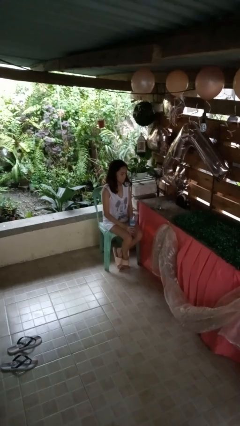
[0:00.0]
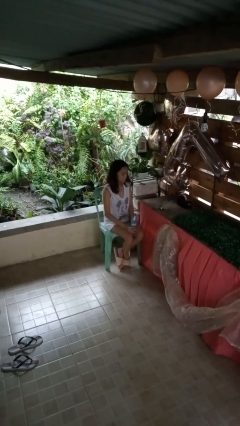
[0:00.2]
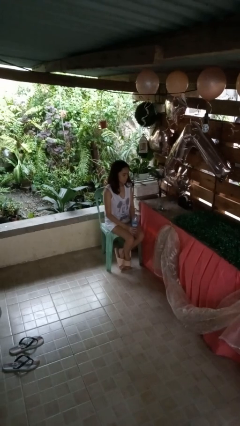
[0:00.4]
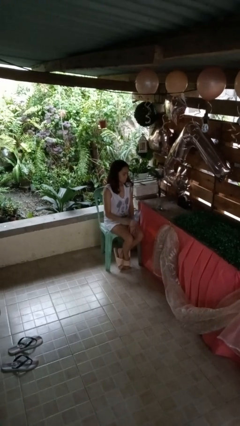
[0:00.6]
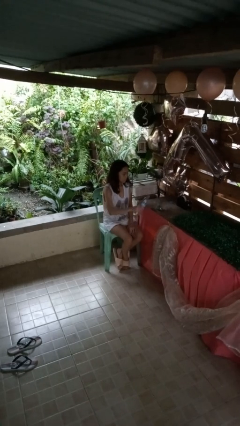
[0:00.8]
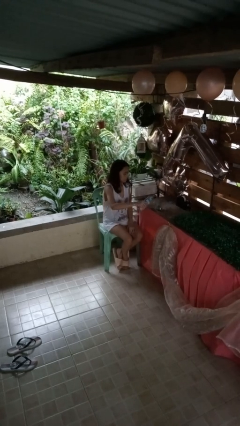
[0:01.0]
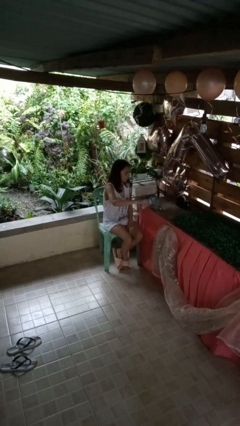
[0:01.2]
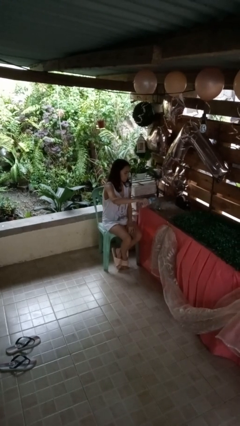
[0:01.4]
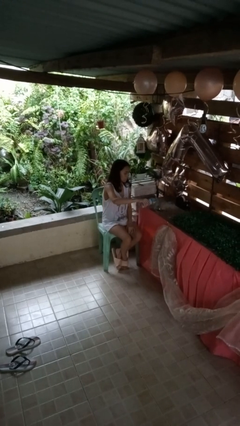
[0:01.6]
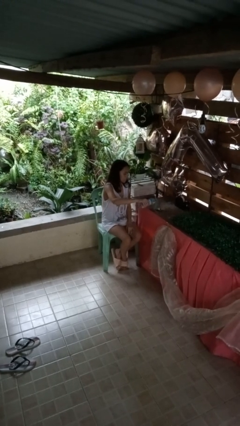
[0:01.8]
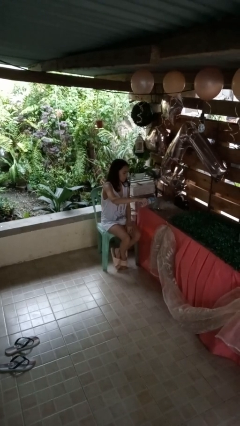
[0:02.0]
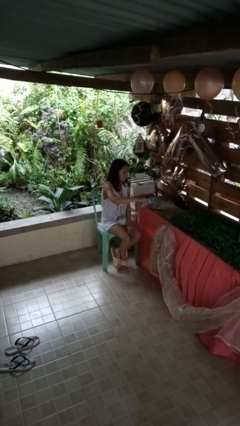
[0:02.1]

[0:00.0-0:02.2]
person pours liquid into cup

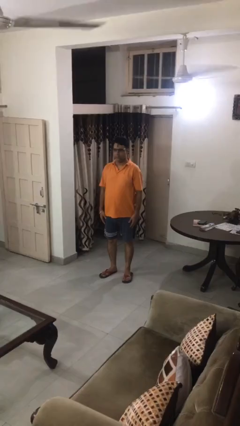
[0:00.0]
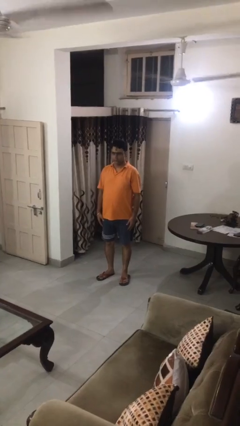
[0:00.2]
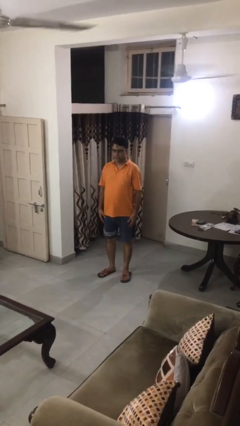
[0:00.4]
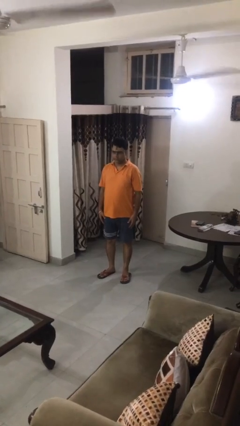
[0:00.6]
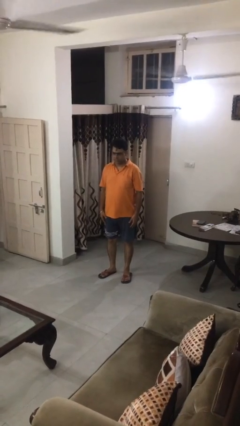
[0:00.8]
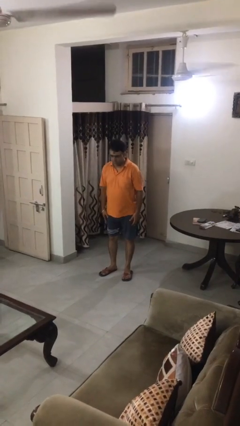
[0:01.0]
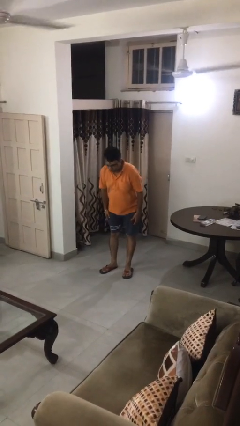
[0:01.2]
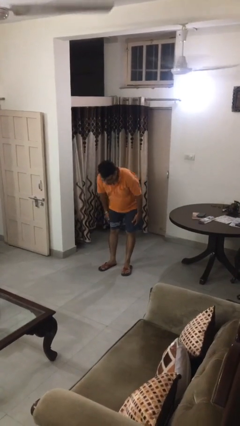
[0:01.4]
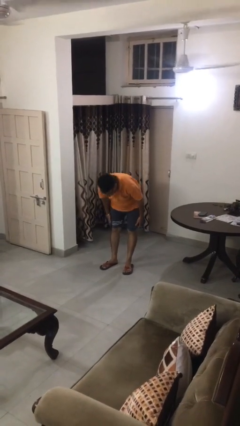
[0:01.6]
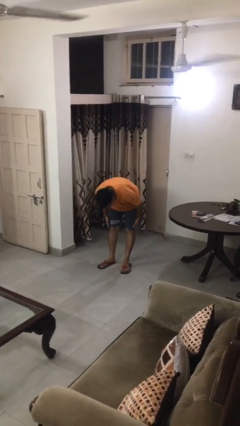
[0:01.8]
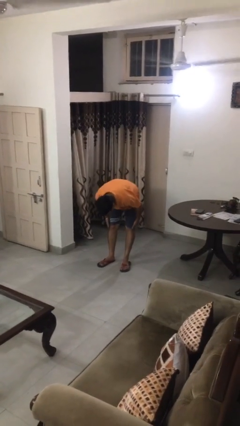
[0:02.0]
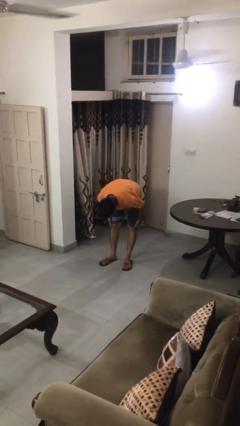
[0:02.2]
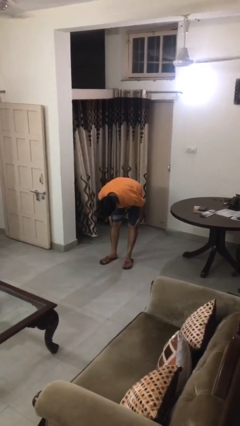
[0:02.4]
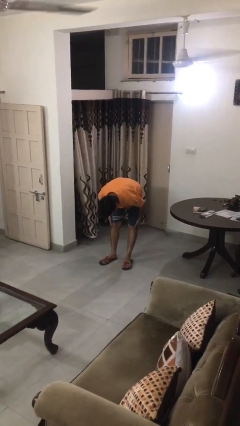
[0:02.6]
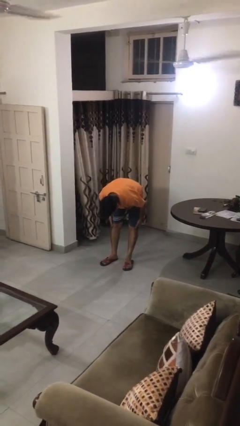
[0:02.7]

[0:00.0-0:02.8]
person bows

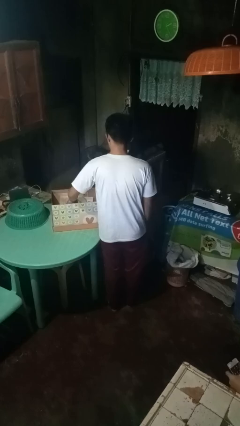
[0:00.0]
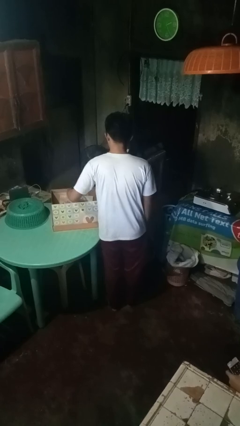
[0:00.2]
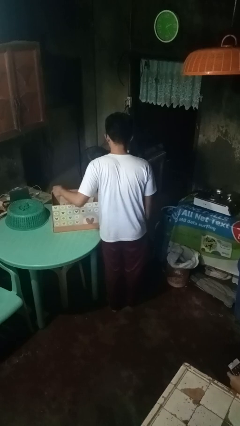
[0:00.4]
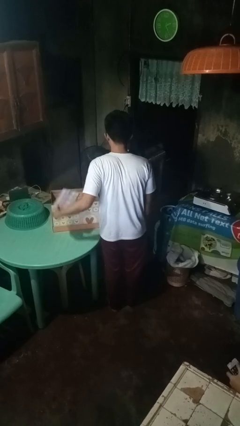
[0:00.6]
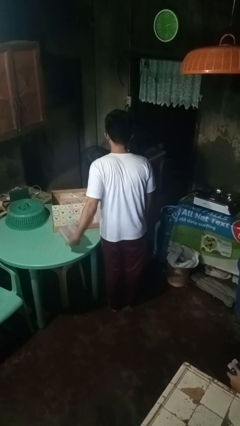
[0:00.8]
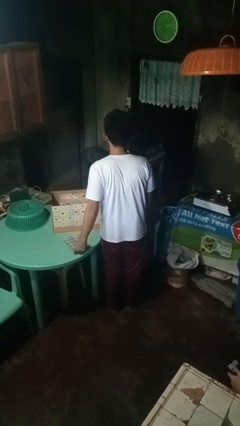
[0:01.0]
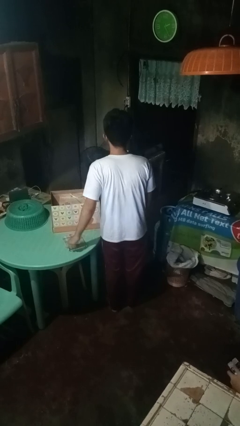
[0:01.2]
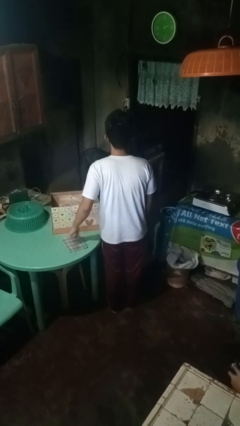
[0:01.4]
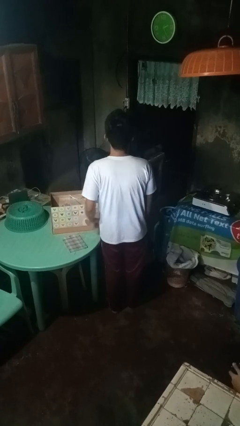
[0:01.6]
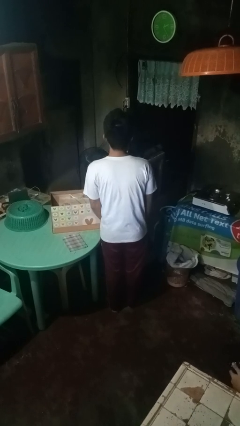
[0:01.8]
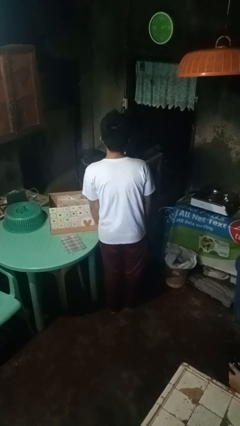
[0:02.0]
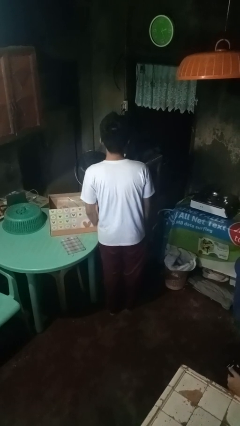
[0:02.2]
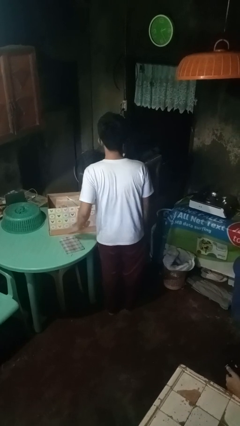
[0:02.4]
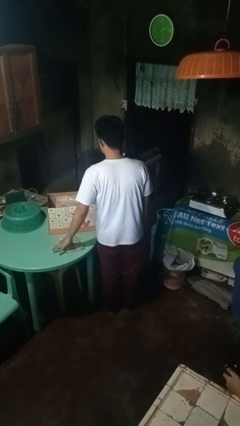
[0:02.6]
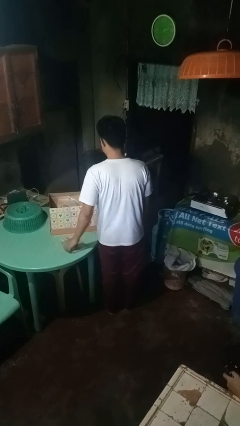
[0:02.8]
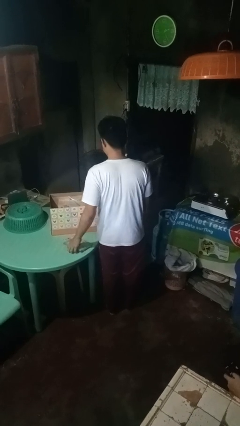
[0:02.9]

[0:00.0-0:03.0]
person takes object from box

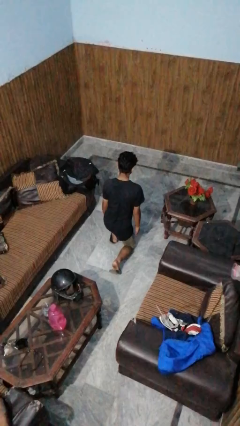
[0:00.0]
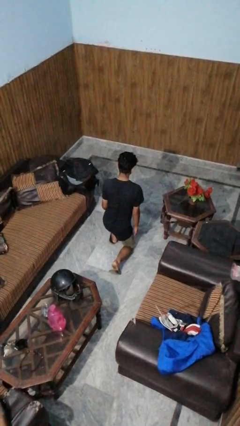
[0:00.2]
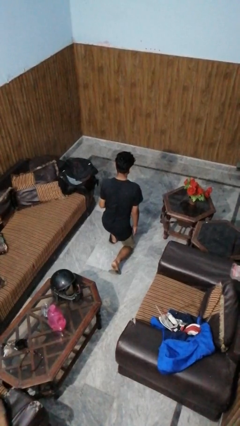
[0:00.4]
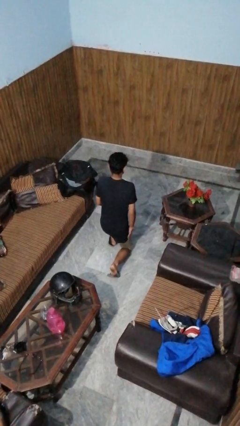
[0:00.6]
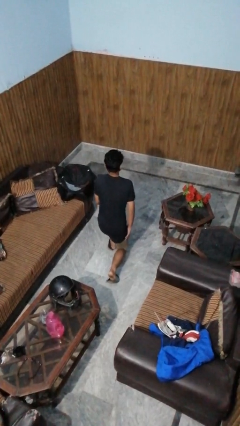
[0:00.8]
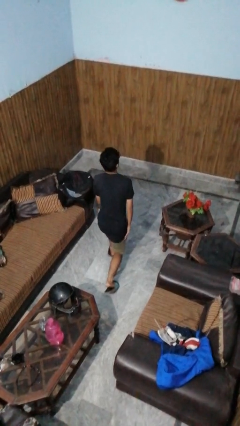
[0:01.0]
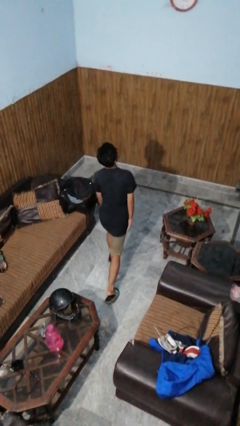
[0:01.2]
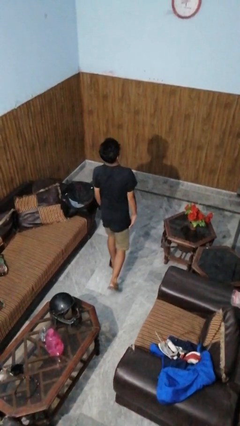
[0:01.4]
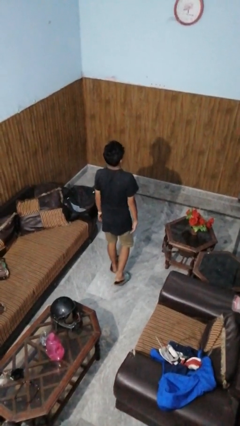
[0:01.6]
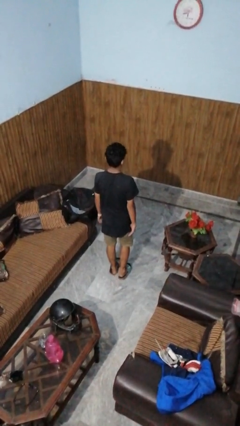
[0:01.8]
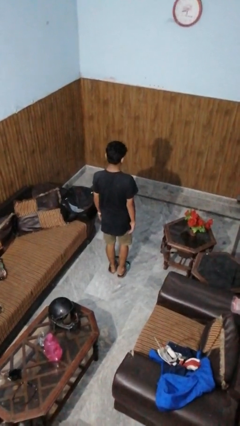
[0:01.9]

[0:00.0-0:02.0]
person stands up from floor

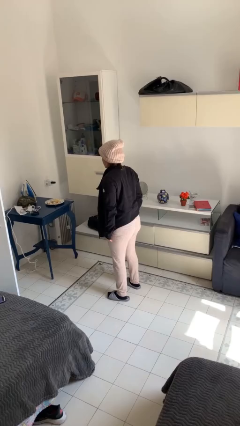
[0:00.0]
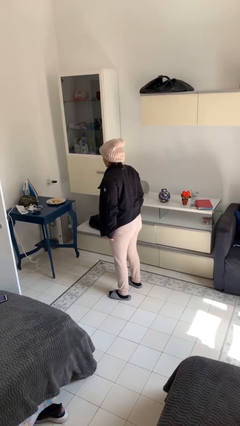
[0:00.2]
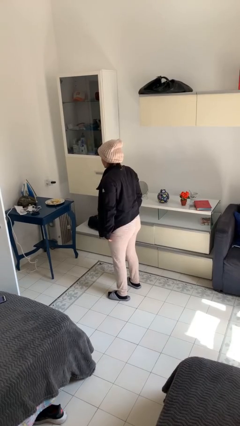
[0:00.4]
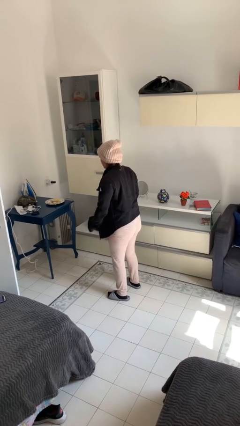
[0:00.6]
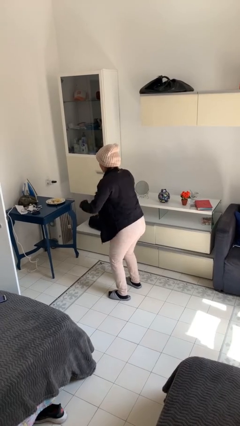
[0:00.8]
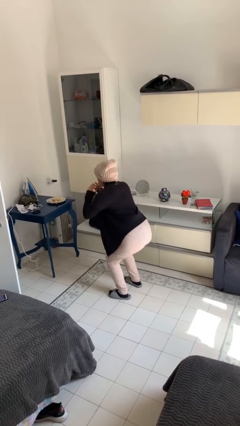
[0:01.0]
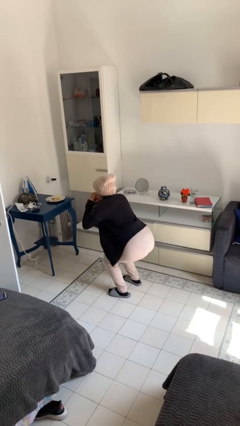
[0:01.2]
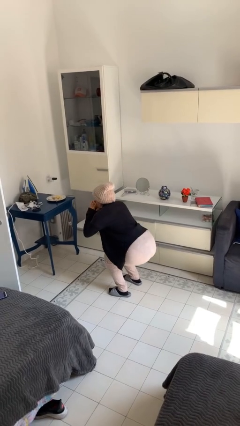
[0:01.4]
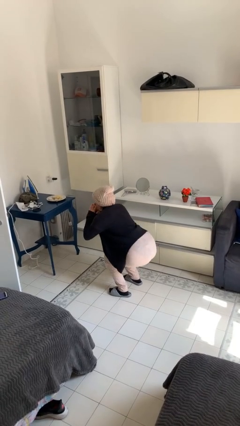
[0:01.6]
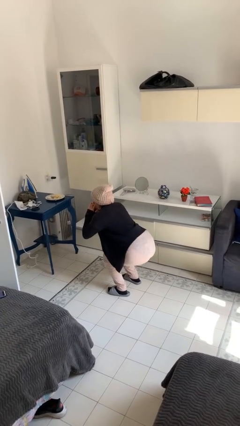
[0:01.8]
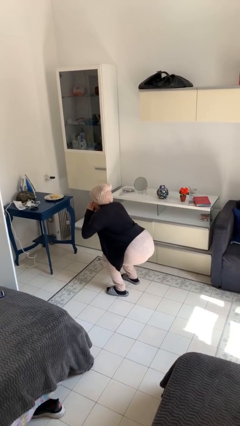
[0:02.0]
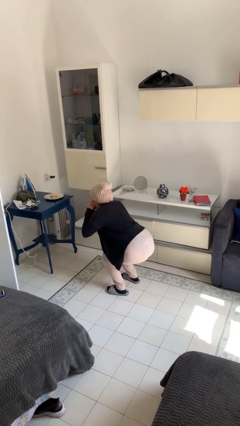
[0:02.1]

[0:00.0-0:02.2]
person squats

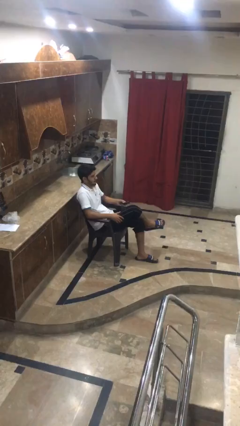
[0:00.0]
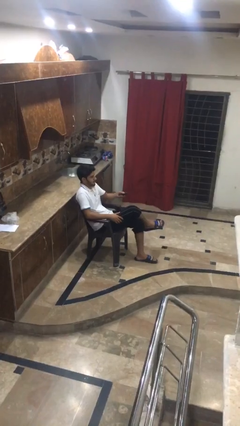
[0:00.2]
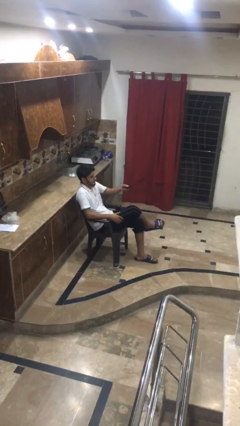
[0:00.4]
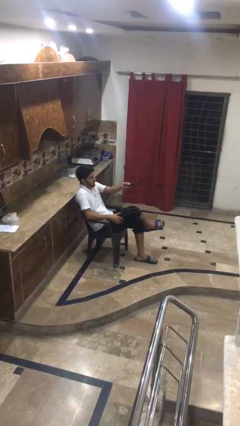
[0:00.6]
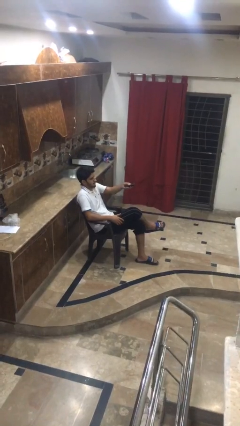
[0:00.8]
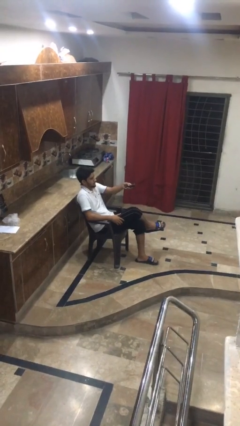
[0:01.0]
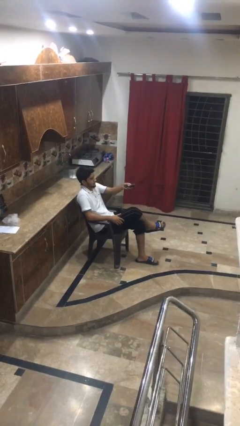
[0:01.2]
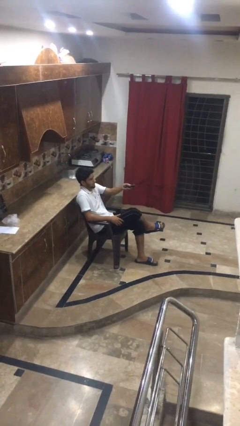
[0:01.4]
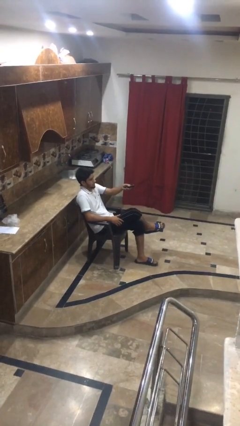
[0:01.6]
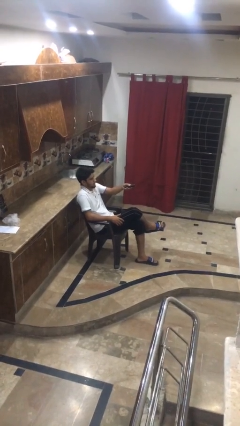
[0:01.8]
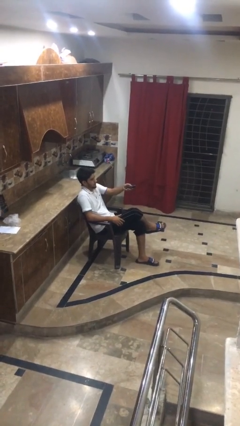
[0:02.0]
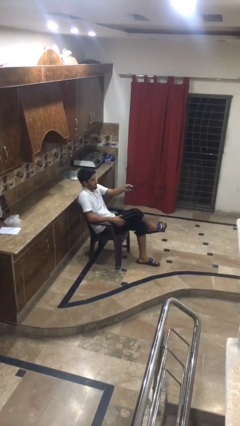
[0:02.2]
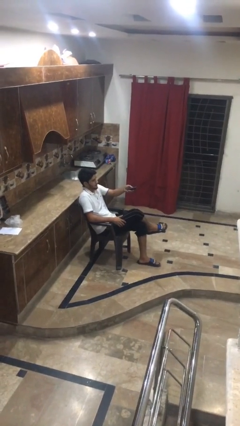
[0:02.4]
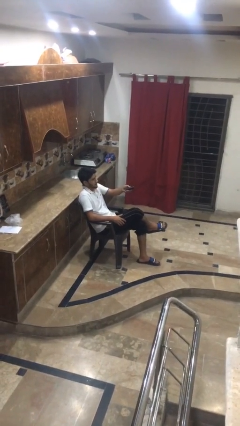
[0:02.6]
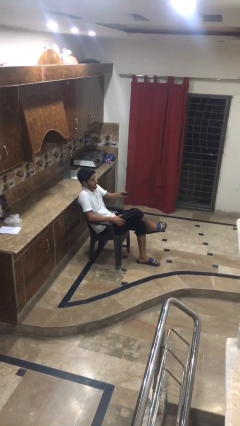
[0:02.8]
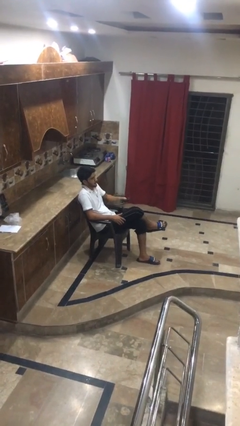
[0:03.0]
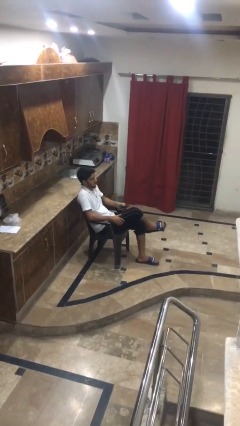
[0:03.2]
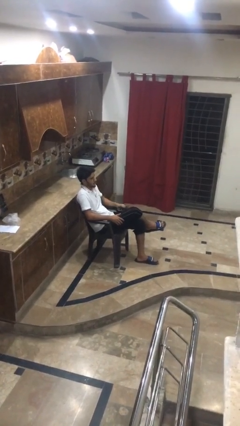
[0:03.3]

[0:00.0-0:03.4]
person uses television remote

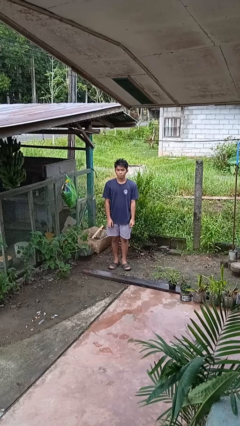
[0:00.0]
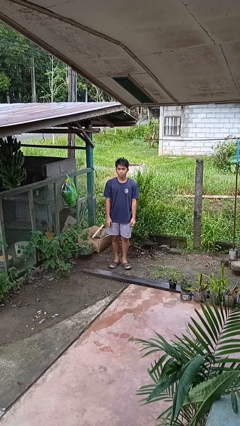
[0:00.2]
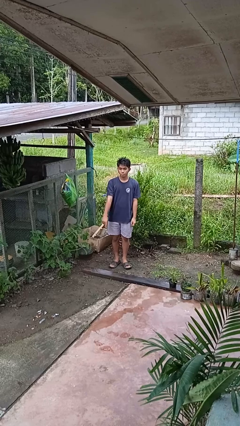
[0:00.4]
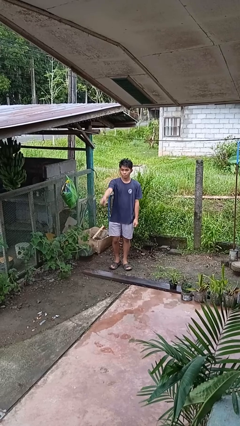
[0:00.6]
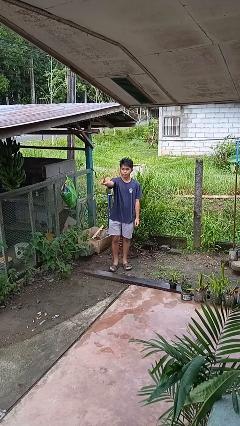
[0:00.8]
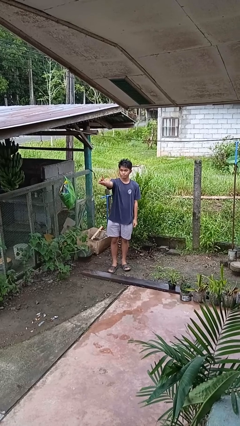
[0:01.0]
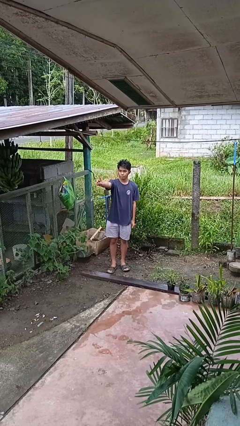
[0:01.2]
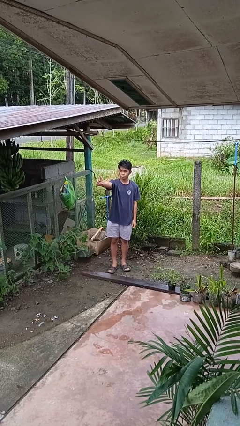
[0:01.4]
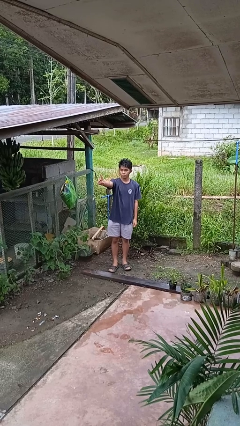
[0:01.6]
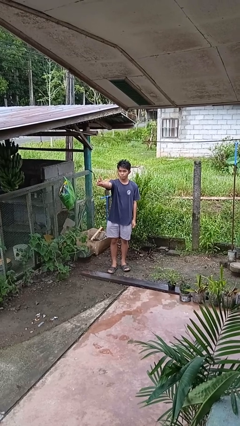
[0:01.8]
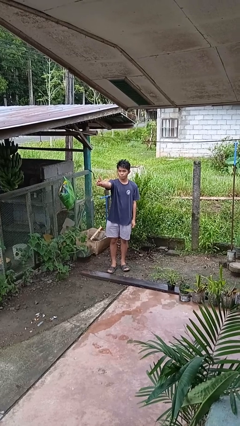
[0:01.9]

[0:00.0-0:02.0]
person gestures number one
